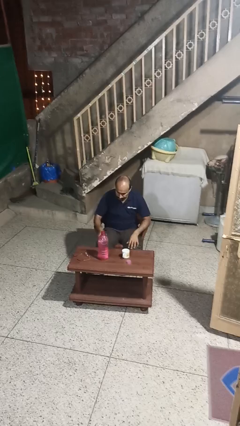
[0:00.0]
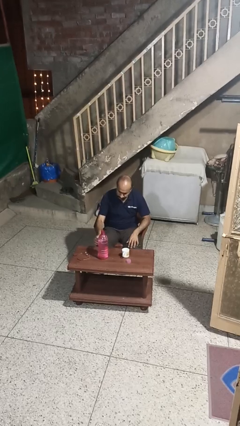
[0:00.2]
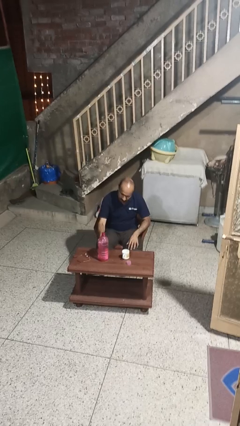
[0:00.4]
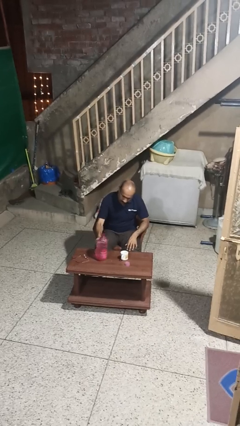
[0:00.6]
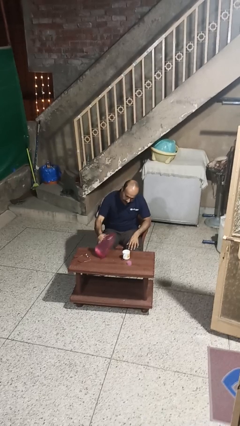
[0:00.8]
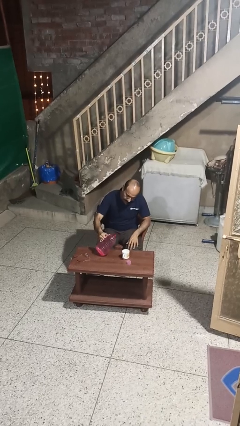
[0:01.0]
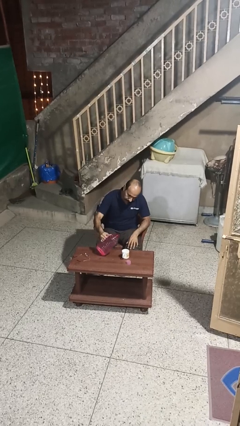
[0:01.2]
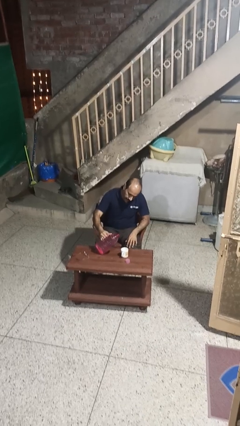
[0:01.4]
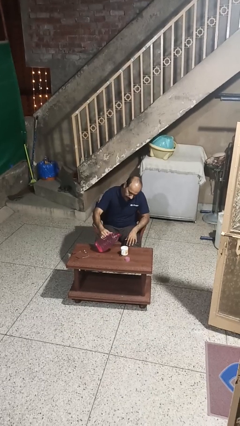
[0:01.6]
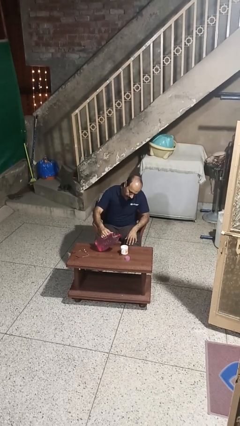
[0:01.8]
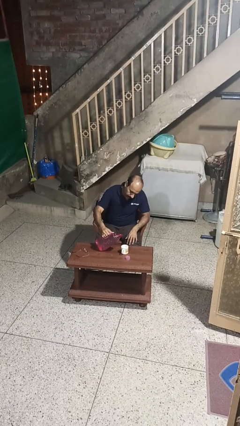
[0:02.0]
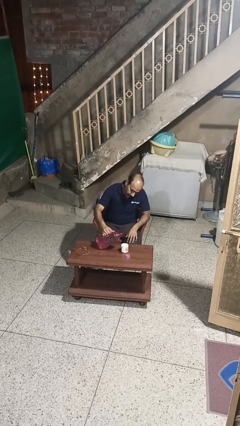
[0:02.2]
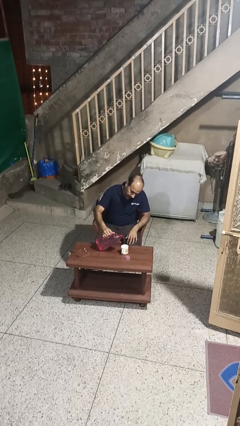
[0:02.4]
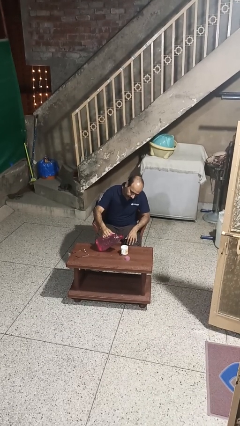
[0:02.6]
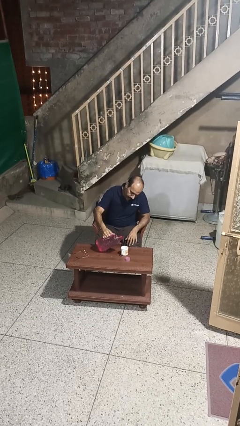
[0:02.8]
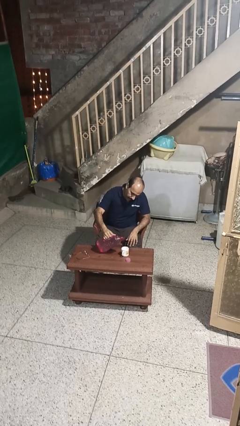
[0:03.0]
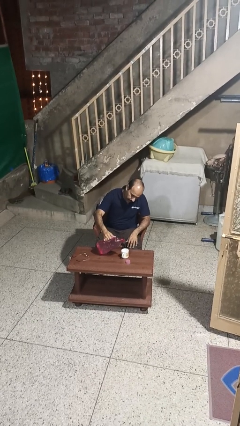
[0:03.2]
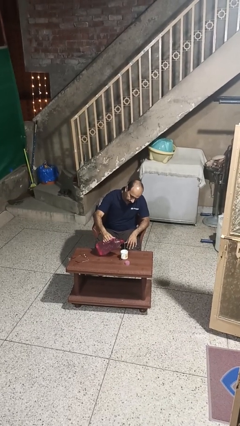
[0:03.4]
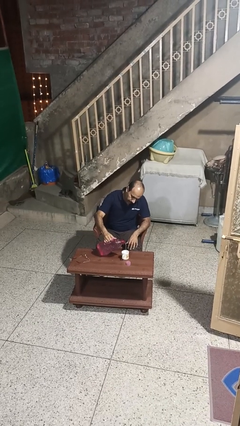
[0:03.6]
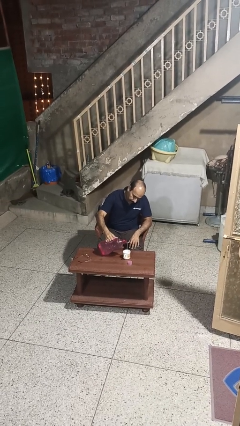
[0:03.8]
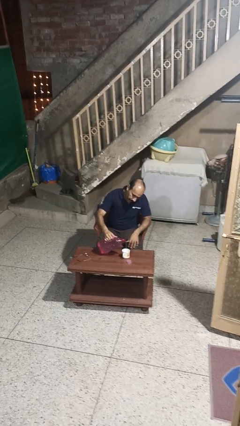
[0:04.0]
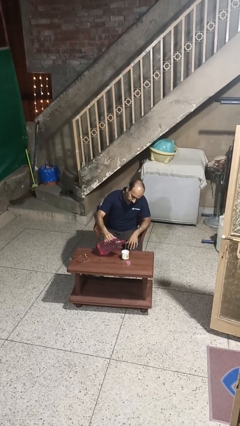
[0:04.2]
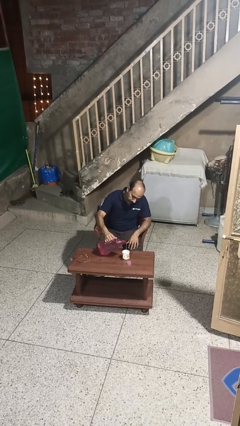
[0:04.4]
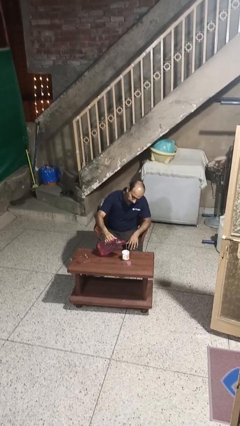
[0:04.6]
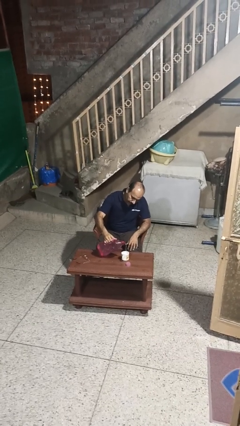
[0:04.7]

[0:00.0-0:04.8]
person pours liquid into cup

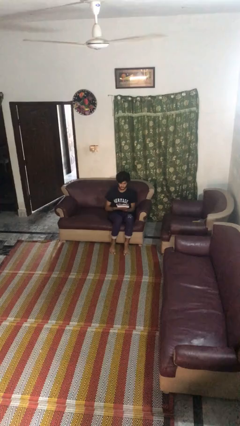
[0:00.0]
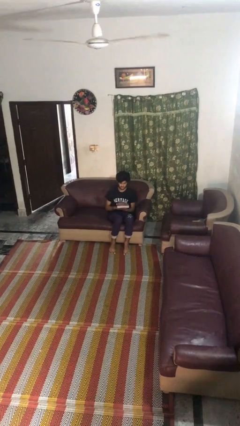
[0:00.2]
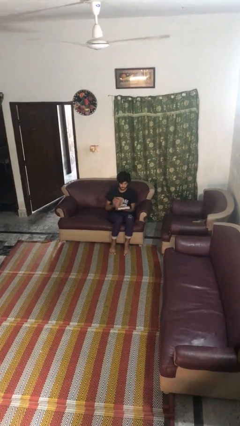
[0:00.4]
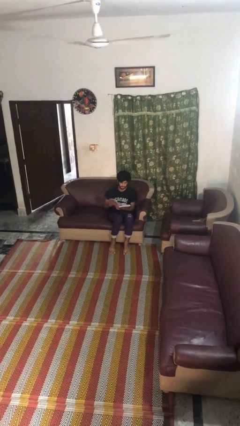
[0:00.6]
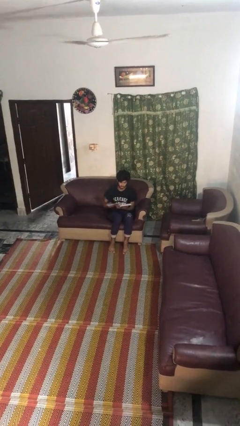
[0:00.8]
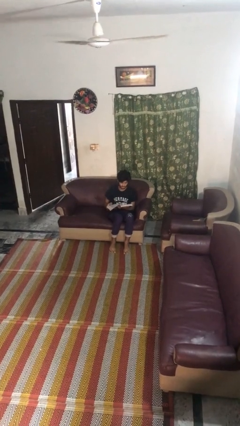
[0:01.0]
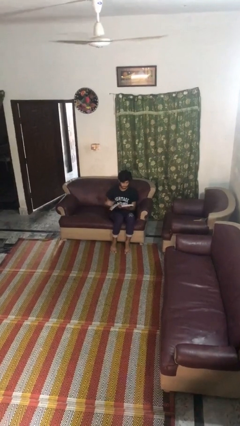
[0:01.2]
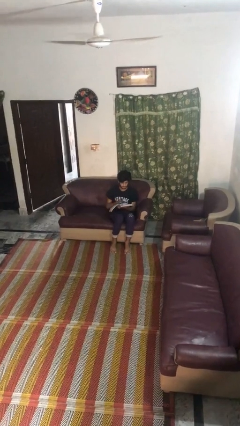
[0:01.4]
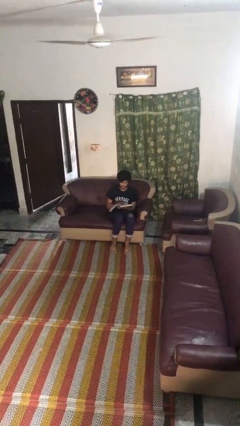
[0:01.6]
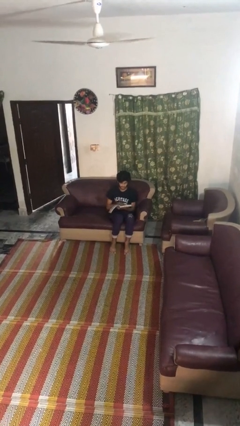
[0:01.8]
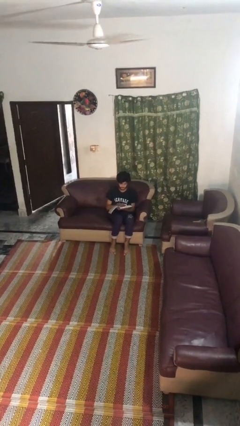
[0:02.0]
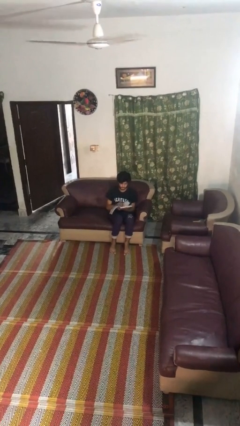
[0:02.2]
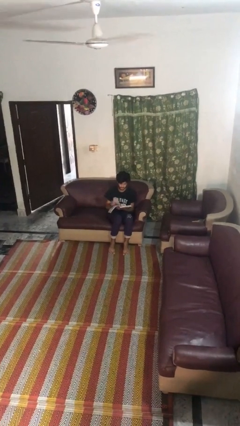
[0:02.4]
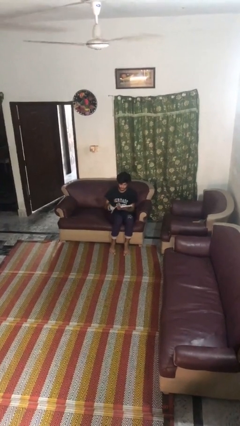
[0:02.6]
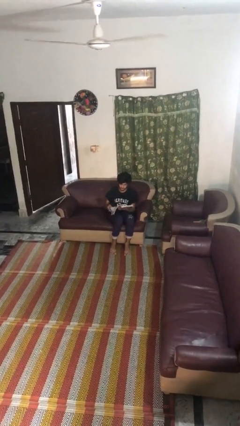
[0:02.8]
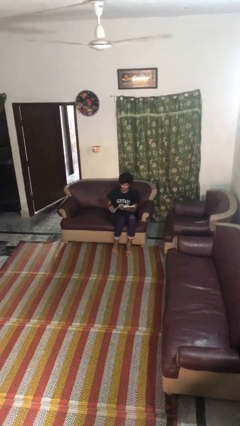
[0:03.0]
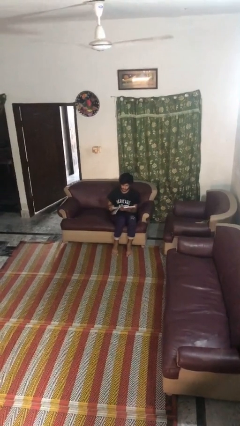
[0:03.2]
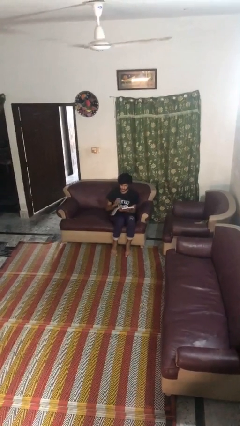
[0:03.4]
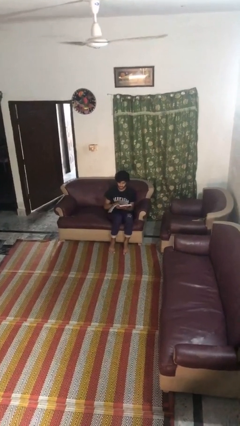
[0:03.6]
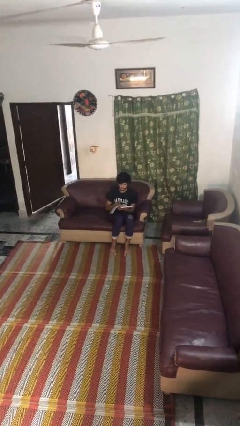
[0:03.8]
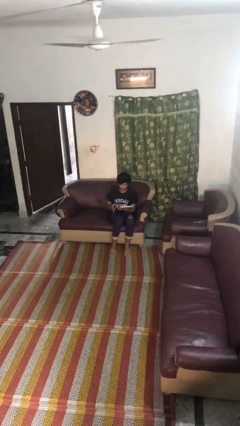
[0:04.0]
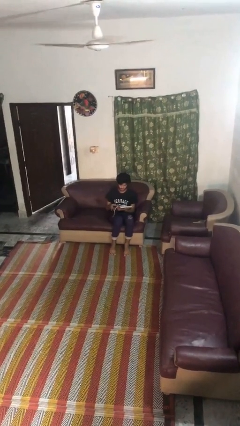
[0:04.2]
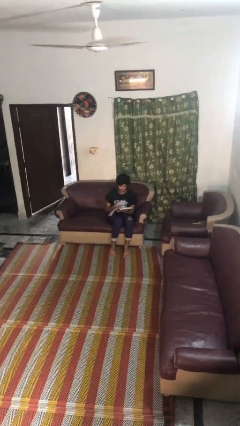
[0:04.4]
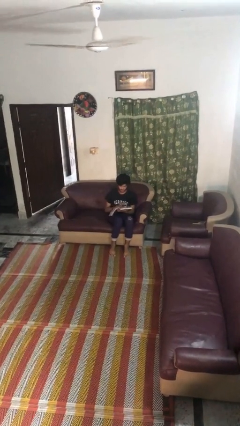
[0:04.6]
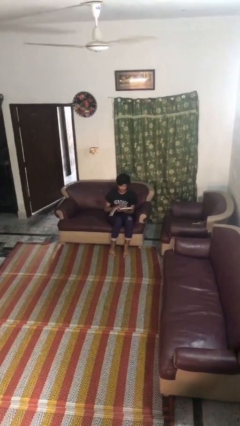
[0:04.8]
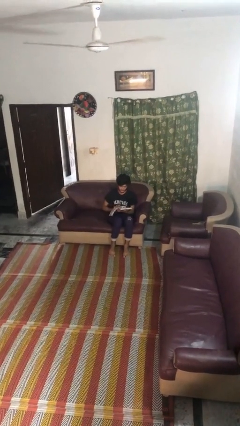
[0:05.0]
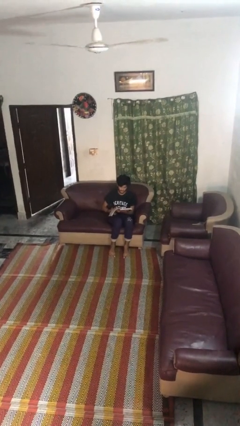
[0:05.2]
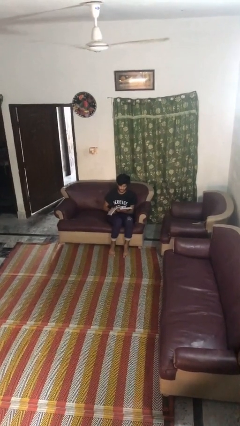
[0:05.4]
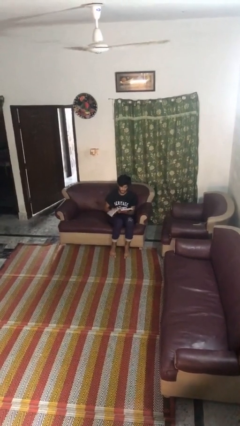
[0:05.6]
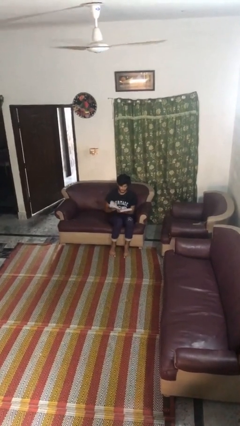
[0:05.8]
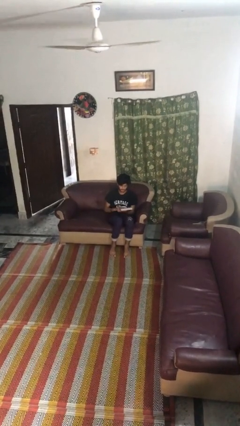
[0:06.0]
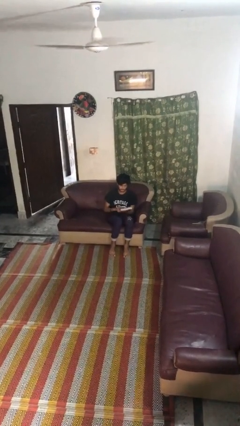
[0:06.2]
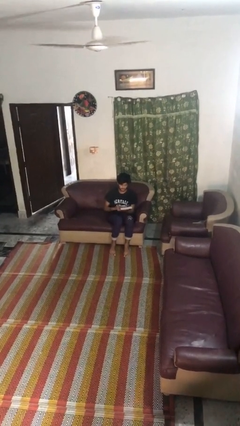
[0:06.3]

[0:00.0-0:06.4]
person reads book

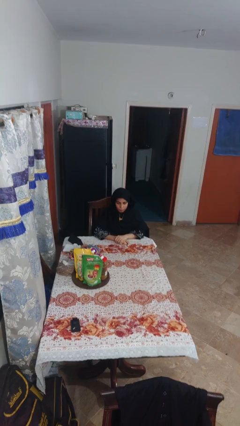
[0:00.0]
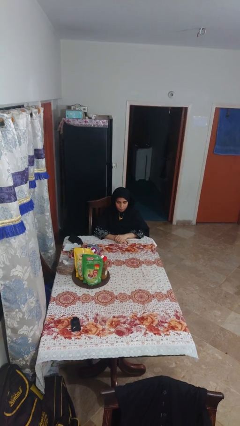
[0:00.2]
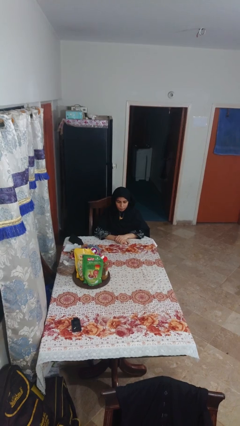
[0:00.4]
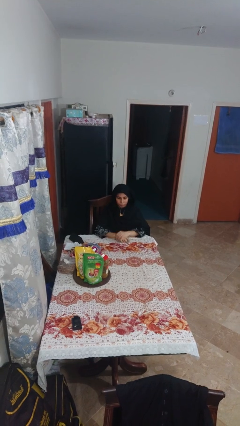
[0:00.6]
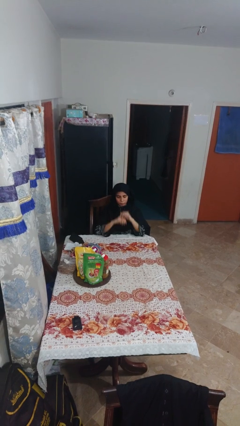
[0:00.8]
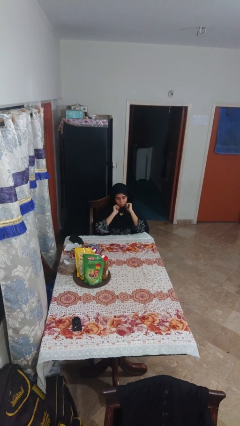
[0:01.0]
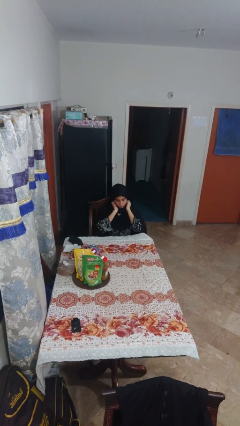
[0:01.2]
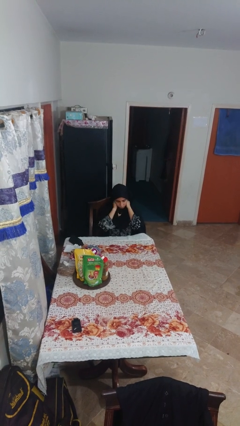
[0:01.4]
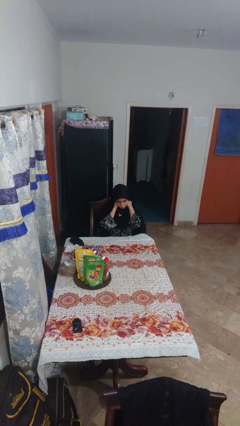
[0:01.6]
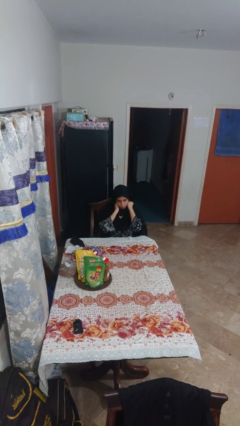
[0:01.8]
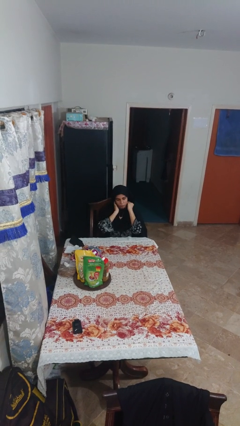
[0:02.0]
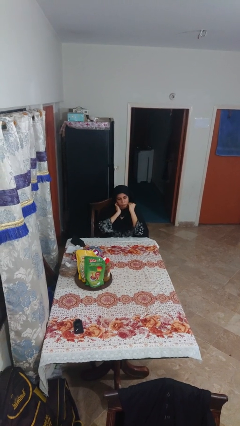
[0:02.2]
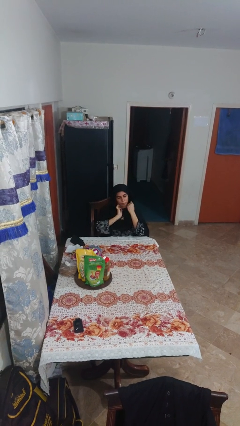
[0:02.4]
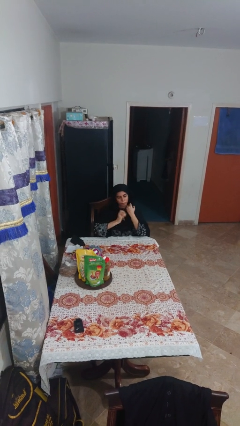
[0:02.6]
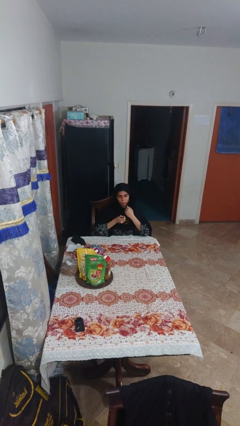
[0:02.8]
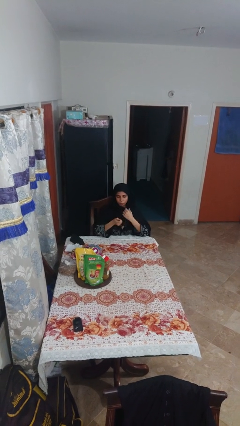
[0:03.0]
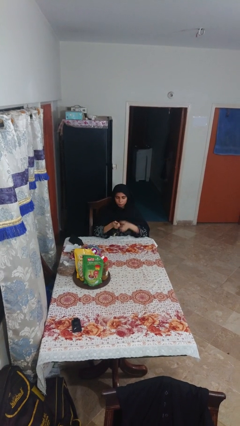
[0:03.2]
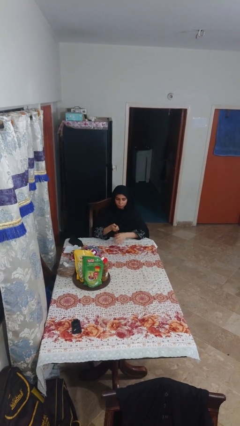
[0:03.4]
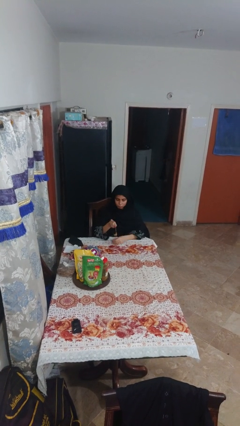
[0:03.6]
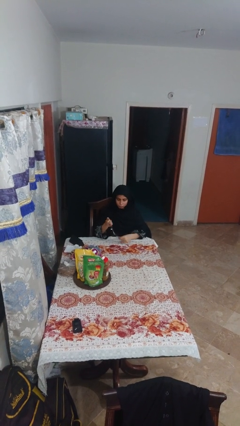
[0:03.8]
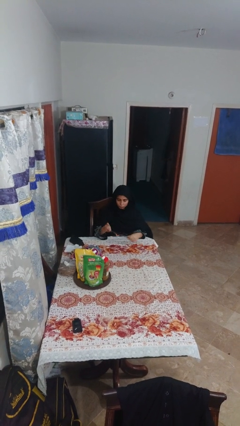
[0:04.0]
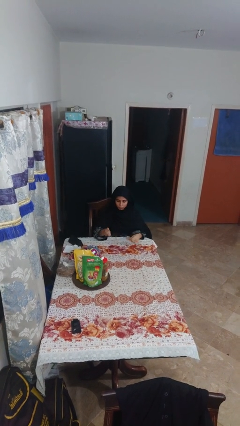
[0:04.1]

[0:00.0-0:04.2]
person takes off necklace

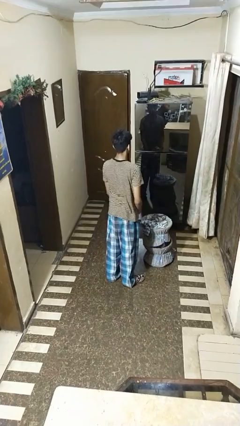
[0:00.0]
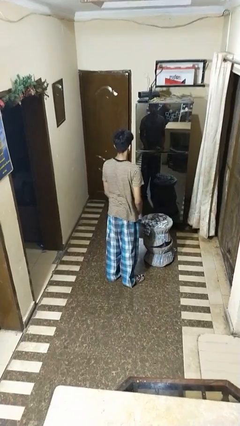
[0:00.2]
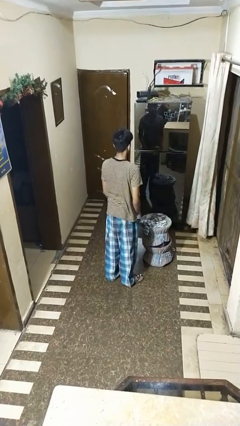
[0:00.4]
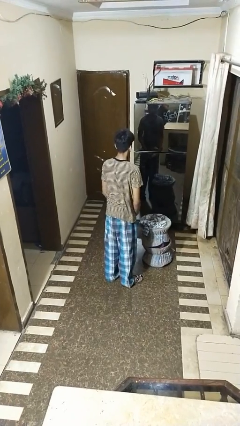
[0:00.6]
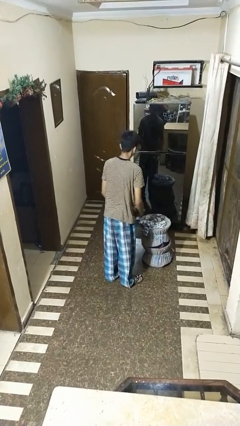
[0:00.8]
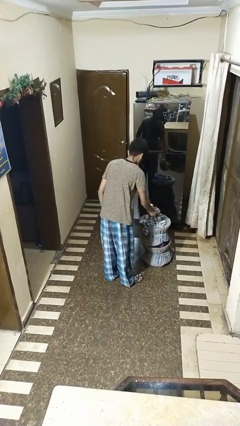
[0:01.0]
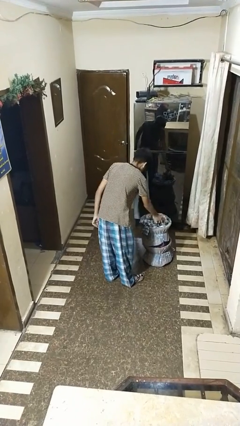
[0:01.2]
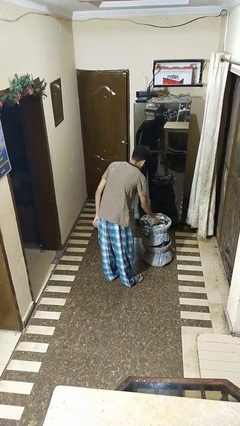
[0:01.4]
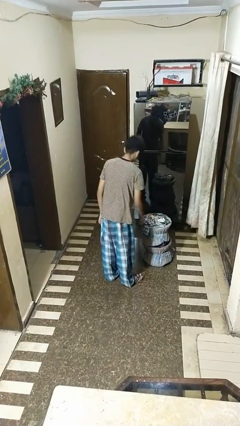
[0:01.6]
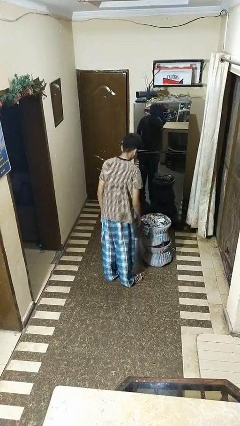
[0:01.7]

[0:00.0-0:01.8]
person puts object into basket

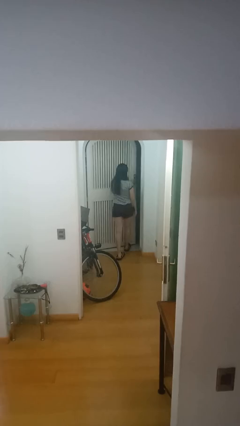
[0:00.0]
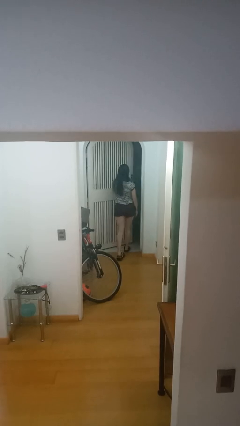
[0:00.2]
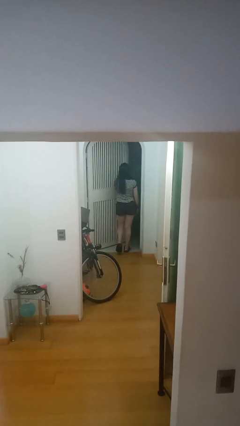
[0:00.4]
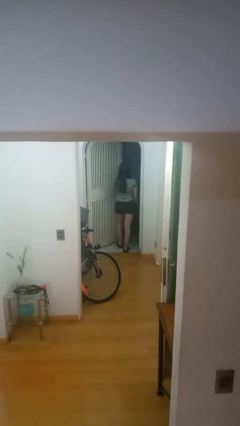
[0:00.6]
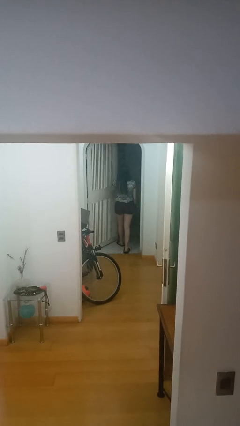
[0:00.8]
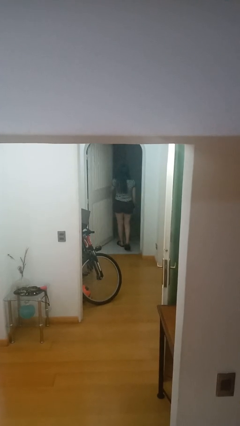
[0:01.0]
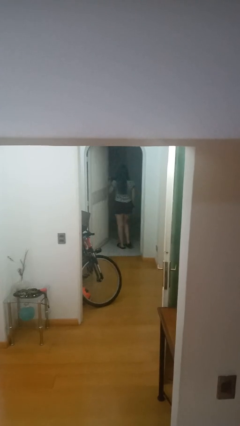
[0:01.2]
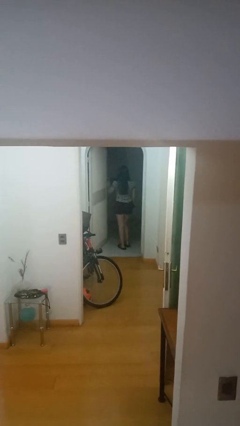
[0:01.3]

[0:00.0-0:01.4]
person opens facility door
